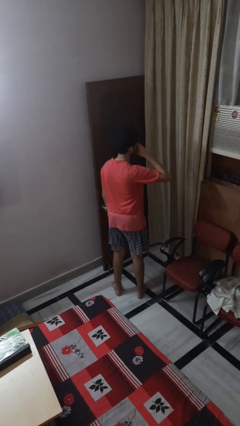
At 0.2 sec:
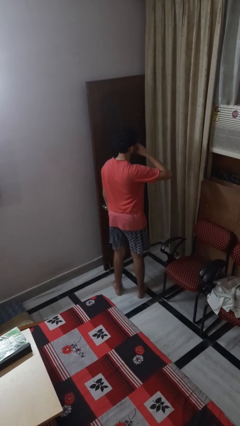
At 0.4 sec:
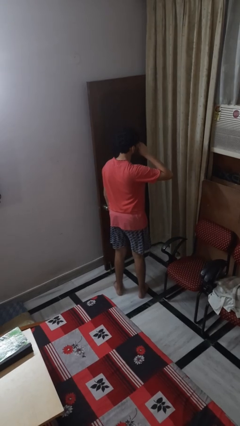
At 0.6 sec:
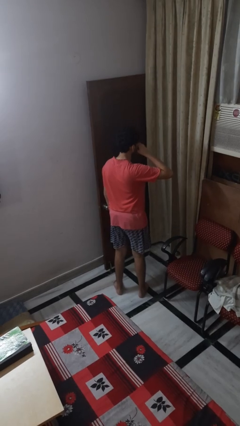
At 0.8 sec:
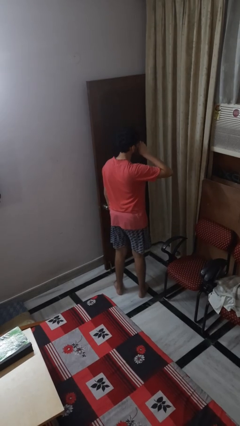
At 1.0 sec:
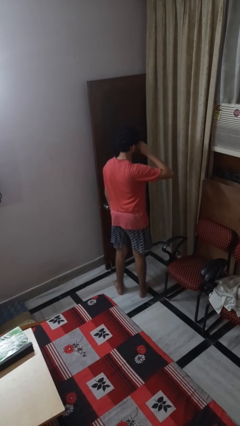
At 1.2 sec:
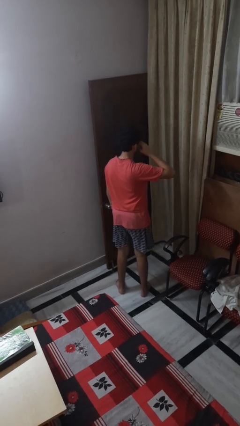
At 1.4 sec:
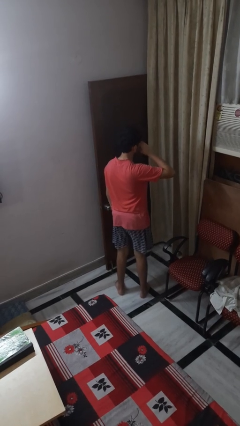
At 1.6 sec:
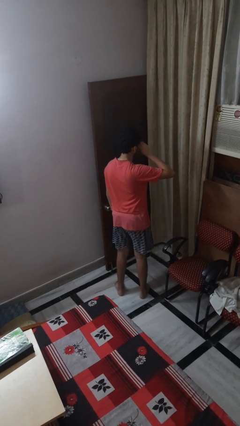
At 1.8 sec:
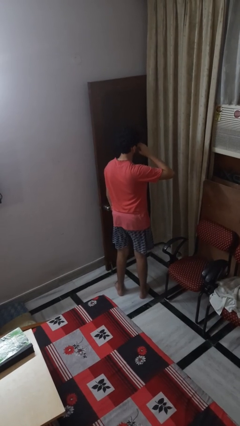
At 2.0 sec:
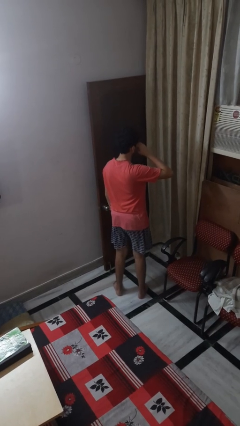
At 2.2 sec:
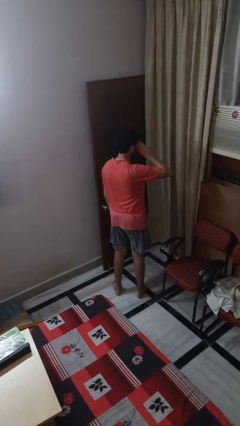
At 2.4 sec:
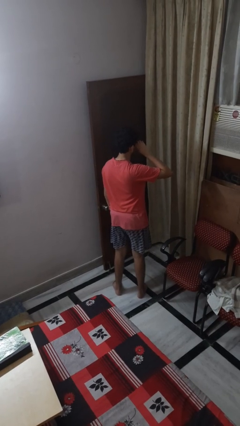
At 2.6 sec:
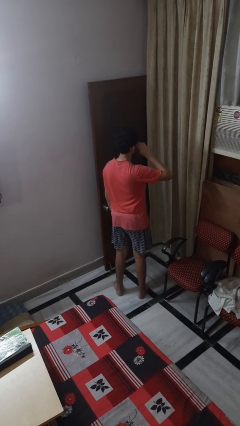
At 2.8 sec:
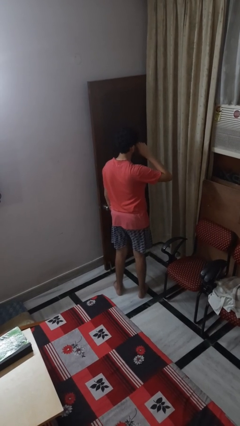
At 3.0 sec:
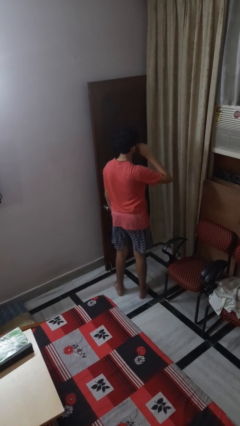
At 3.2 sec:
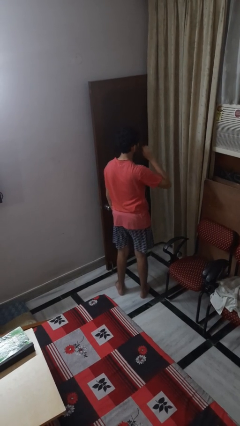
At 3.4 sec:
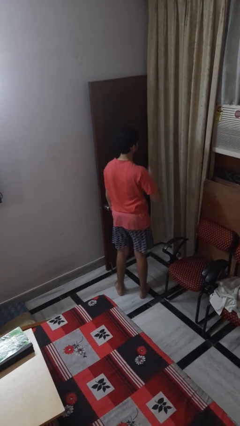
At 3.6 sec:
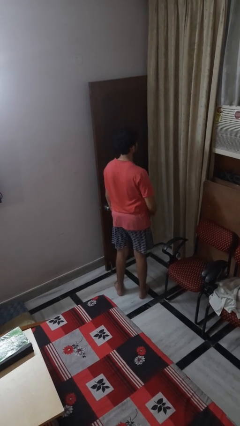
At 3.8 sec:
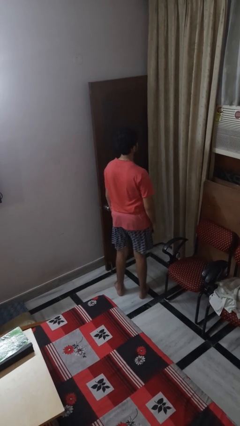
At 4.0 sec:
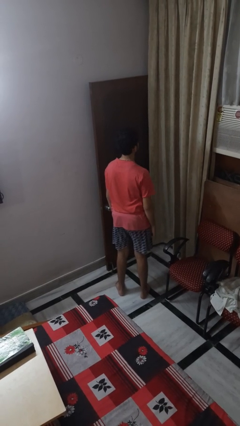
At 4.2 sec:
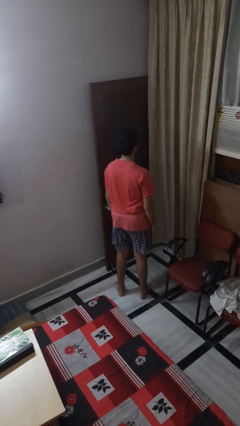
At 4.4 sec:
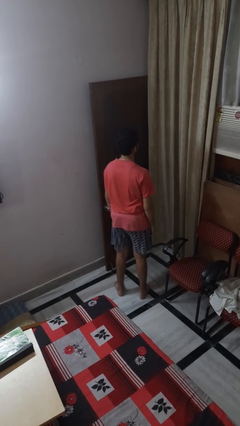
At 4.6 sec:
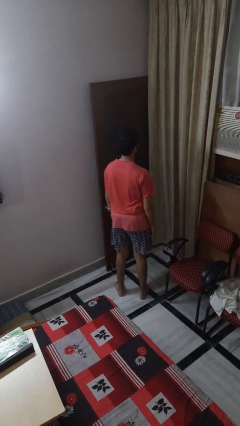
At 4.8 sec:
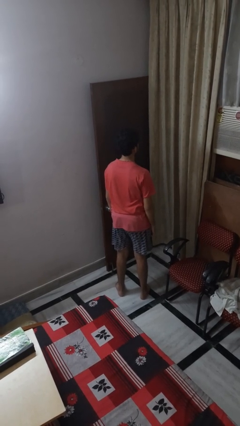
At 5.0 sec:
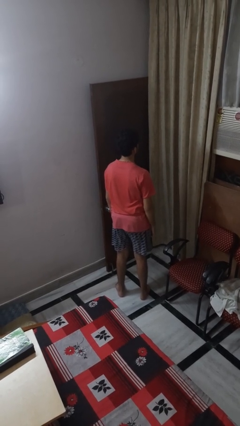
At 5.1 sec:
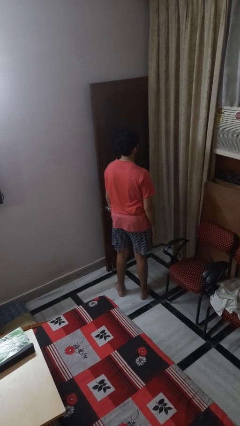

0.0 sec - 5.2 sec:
person rubs eyes

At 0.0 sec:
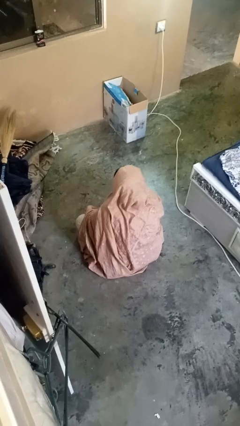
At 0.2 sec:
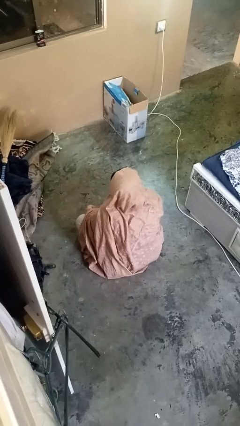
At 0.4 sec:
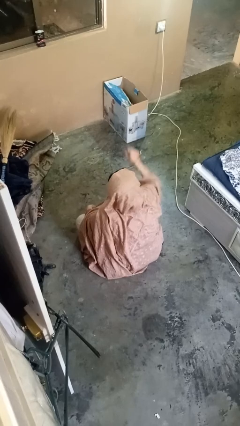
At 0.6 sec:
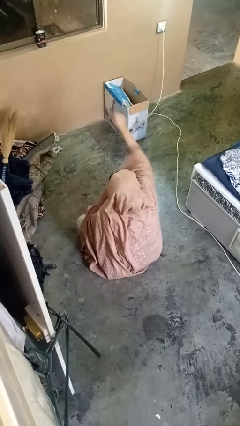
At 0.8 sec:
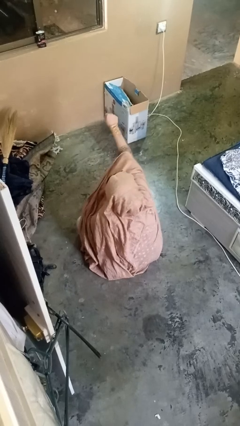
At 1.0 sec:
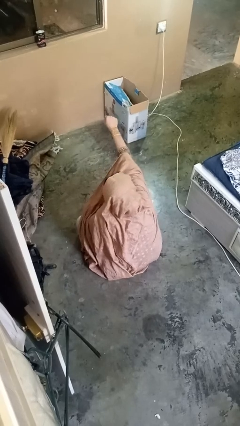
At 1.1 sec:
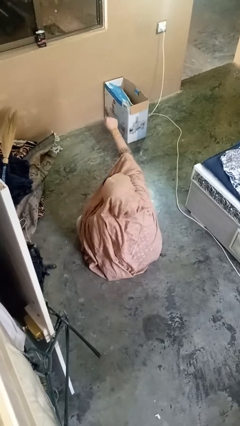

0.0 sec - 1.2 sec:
person punches

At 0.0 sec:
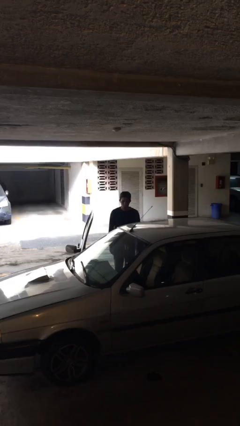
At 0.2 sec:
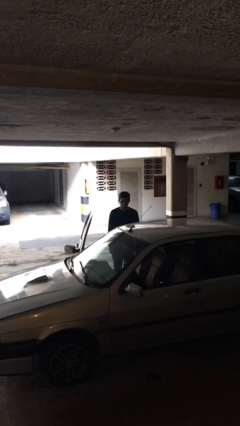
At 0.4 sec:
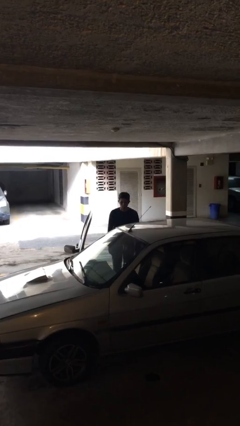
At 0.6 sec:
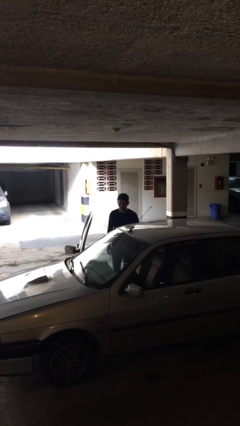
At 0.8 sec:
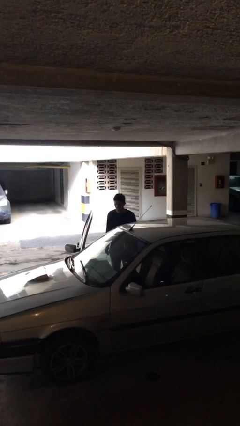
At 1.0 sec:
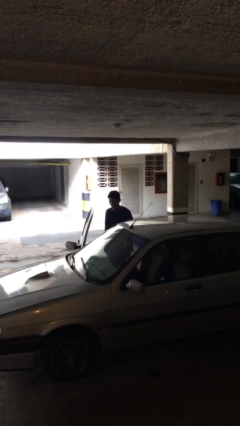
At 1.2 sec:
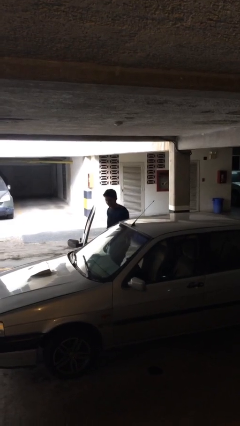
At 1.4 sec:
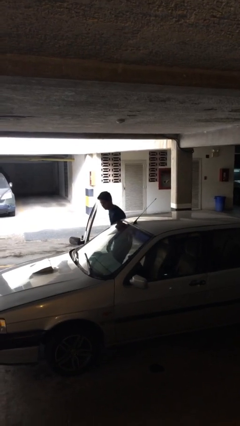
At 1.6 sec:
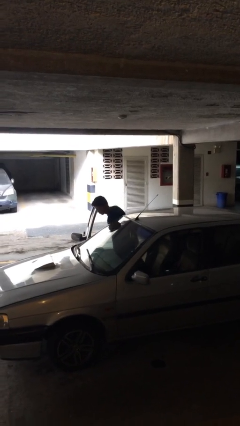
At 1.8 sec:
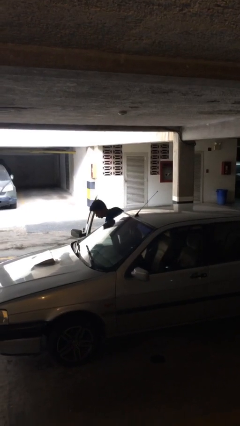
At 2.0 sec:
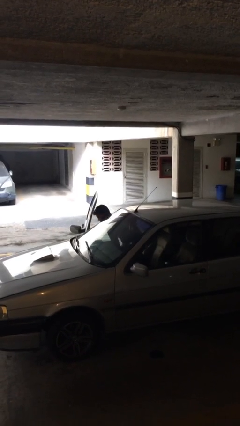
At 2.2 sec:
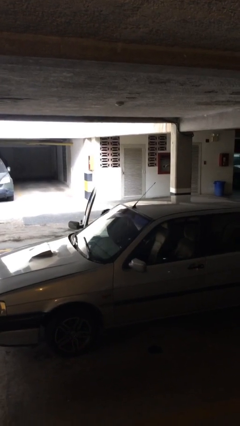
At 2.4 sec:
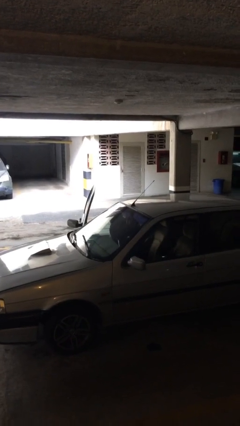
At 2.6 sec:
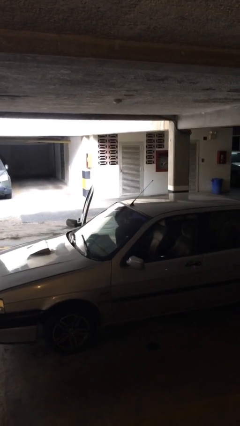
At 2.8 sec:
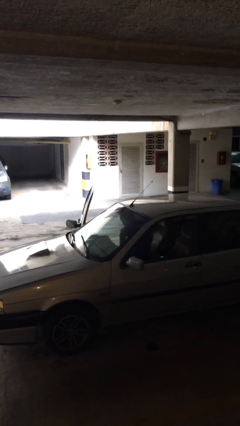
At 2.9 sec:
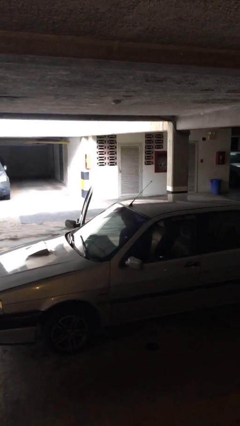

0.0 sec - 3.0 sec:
person enters car

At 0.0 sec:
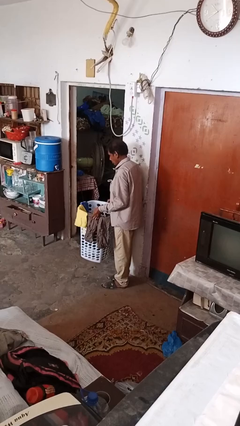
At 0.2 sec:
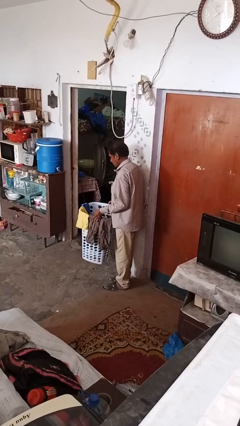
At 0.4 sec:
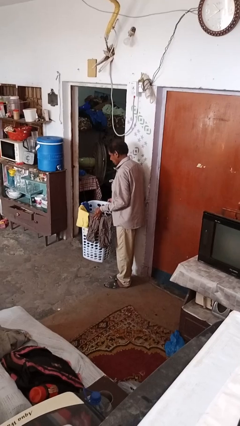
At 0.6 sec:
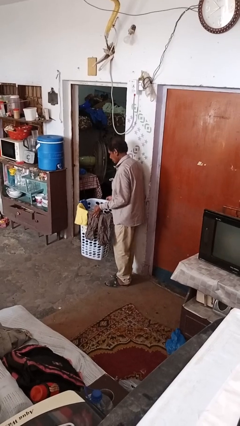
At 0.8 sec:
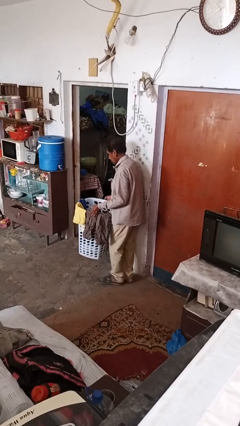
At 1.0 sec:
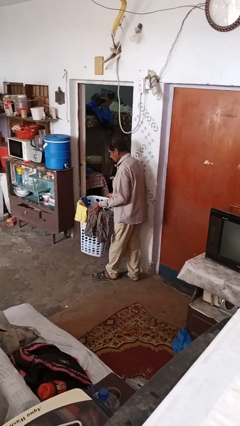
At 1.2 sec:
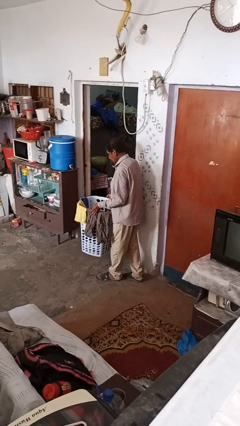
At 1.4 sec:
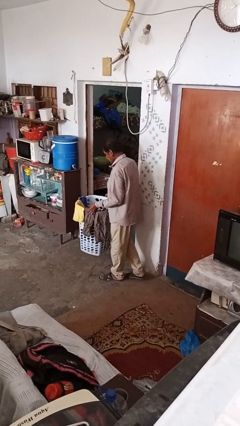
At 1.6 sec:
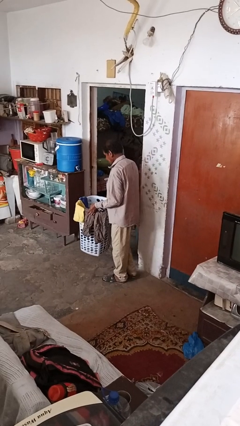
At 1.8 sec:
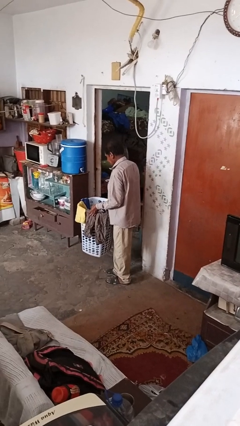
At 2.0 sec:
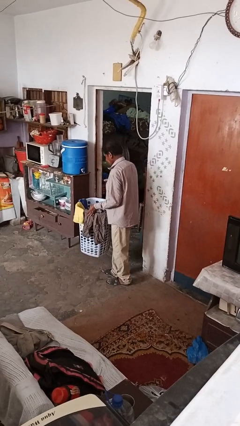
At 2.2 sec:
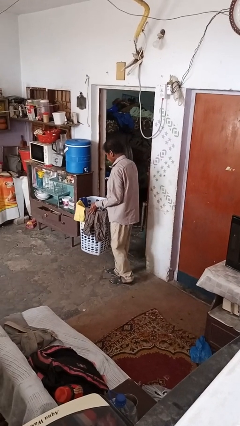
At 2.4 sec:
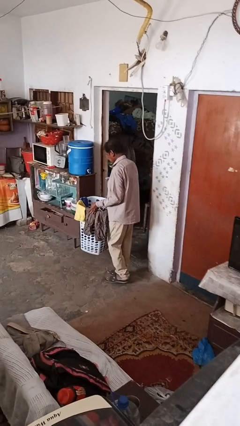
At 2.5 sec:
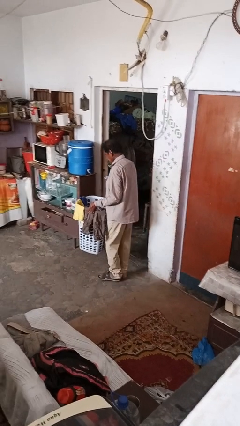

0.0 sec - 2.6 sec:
person carries laundry basket

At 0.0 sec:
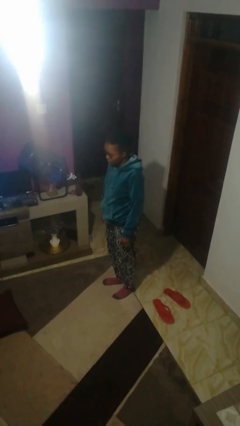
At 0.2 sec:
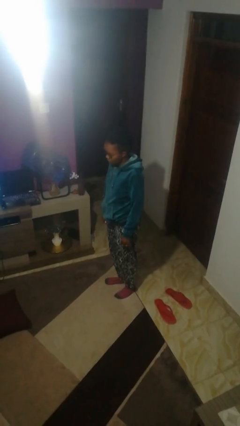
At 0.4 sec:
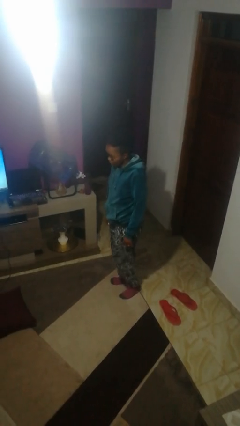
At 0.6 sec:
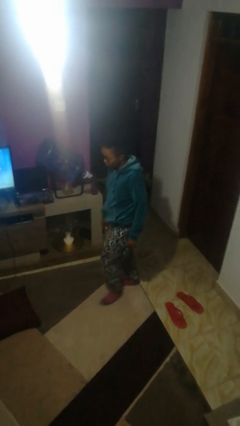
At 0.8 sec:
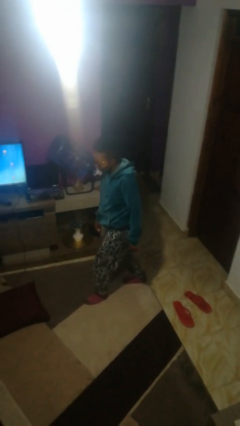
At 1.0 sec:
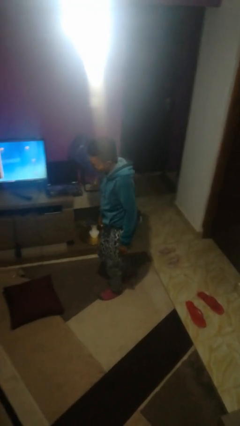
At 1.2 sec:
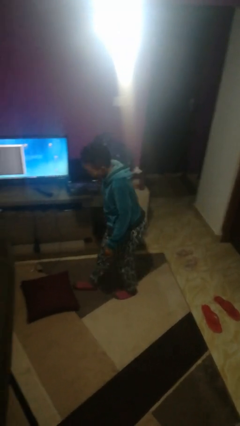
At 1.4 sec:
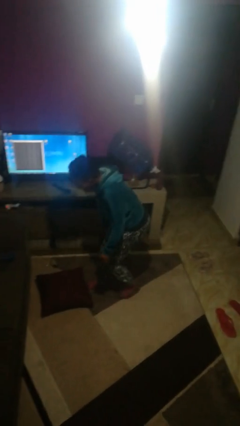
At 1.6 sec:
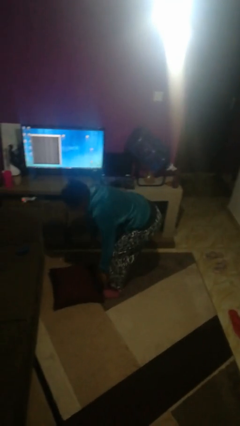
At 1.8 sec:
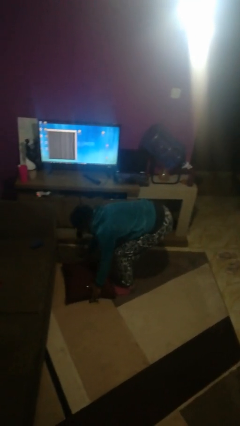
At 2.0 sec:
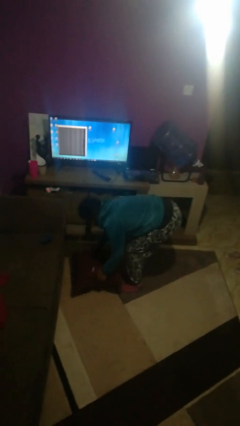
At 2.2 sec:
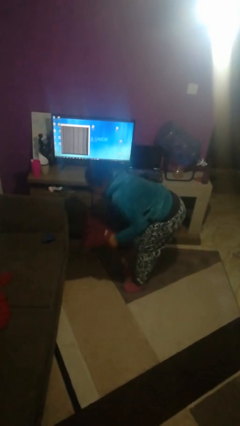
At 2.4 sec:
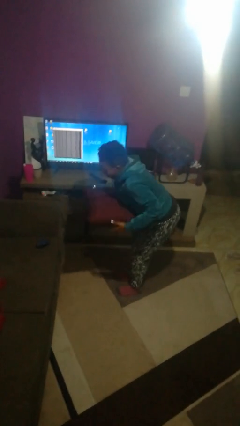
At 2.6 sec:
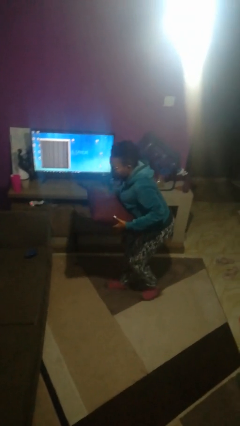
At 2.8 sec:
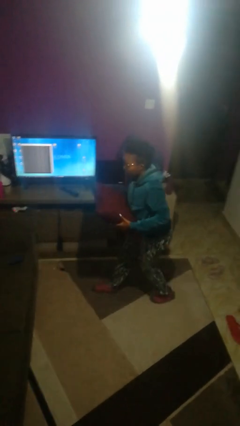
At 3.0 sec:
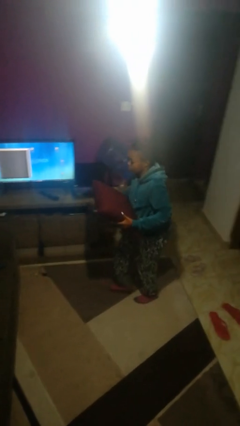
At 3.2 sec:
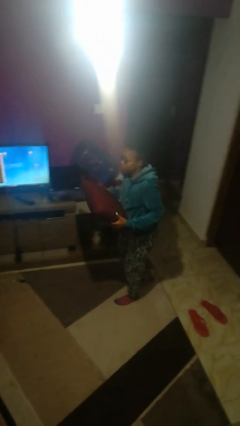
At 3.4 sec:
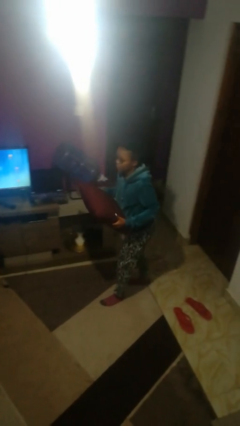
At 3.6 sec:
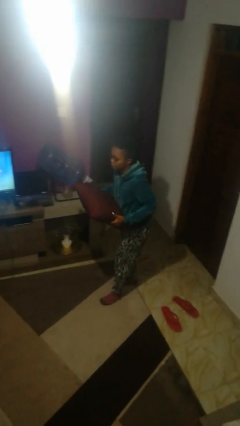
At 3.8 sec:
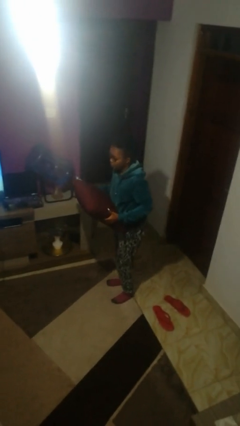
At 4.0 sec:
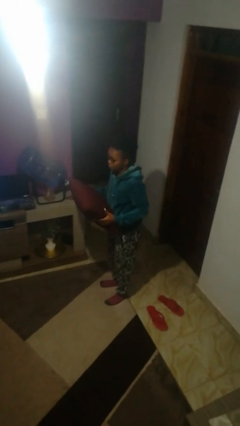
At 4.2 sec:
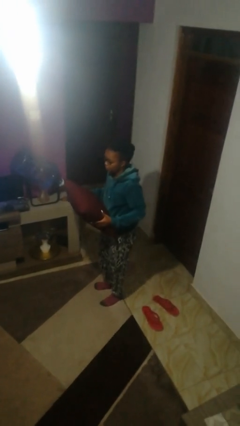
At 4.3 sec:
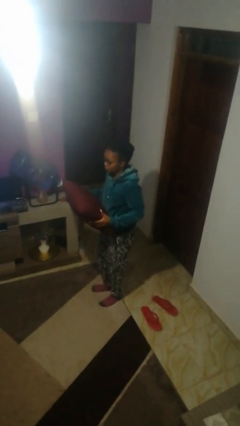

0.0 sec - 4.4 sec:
person picks up object from floor

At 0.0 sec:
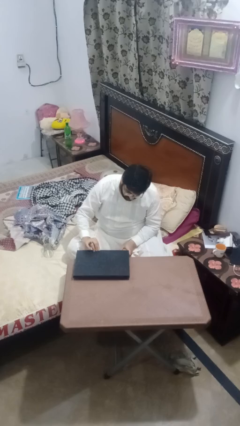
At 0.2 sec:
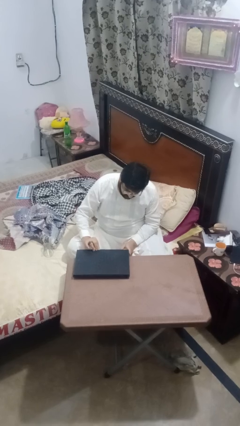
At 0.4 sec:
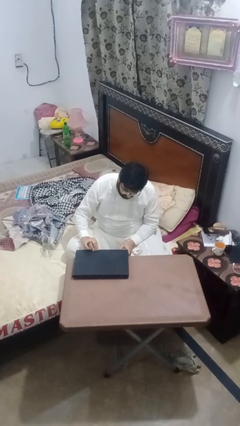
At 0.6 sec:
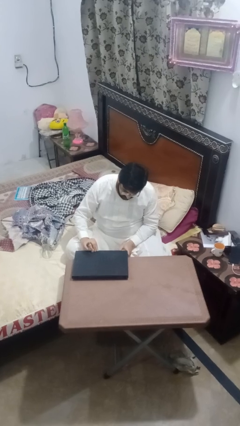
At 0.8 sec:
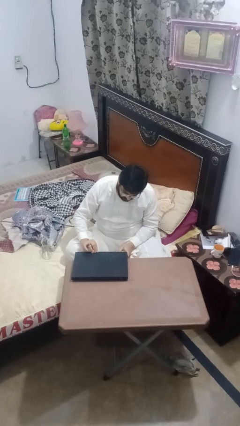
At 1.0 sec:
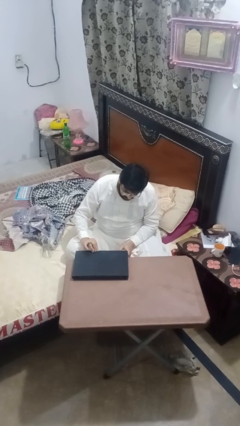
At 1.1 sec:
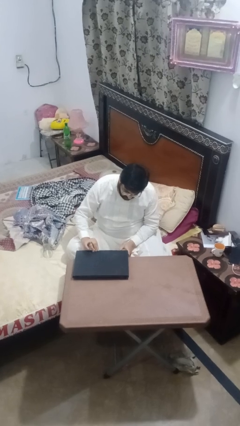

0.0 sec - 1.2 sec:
person closes laptop
